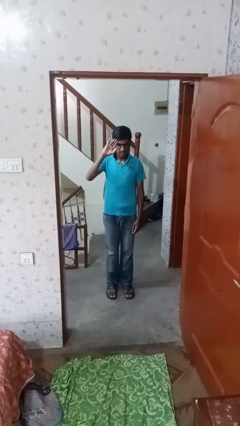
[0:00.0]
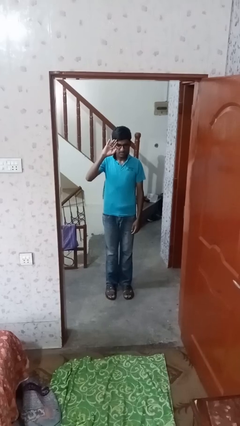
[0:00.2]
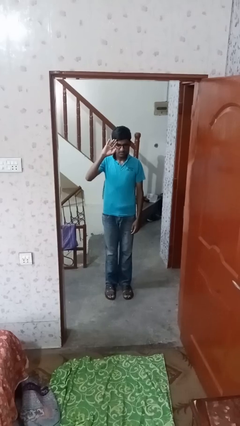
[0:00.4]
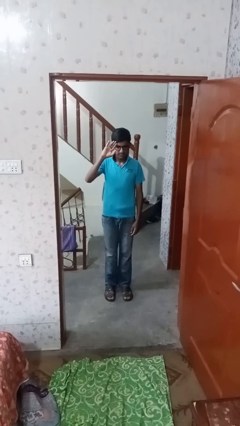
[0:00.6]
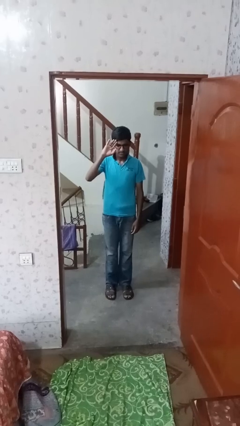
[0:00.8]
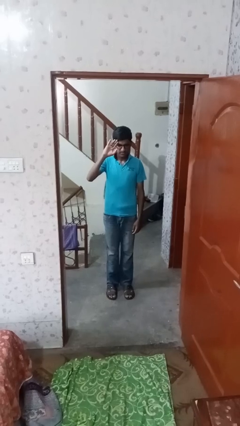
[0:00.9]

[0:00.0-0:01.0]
person salutes

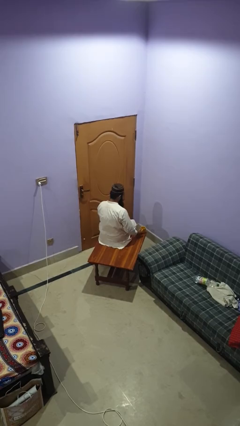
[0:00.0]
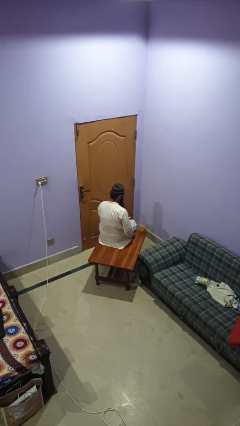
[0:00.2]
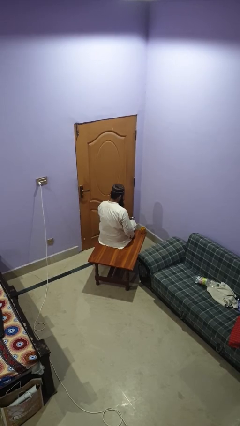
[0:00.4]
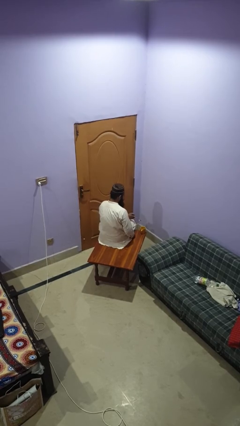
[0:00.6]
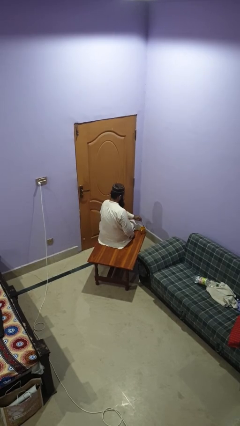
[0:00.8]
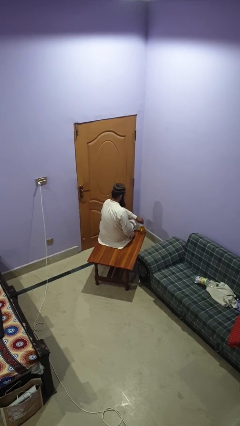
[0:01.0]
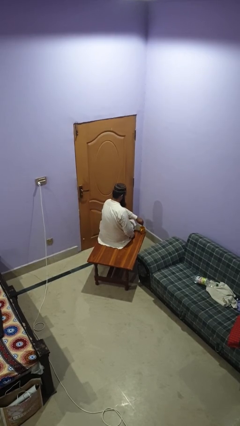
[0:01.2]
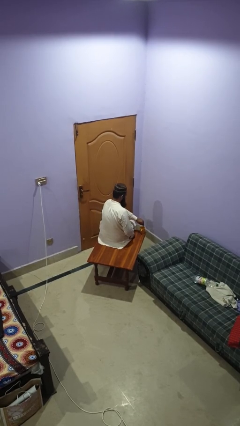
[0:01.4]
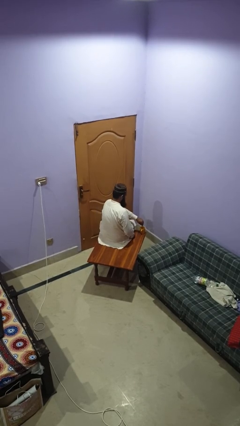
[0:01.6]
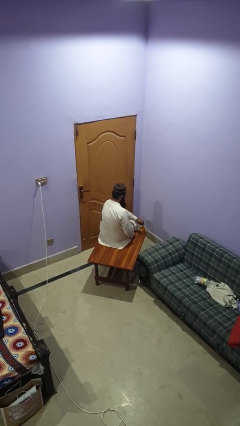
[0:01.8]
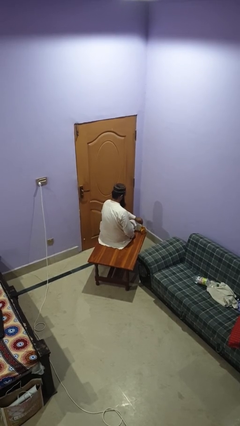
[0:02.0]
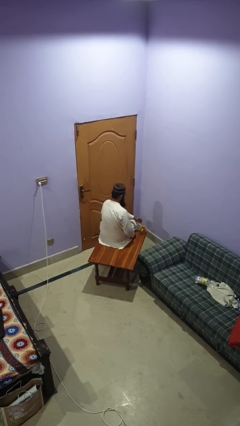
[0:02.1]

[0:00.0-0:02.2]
person stirs mug

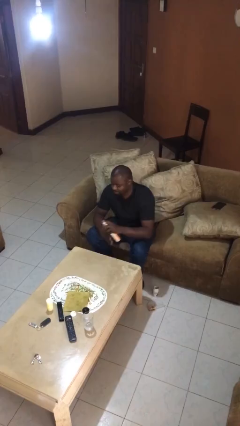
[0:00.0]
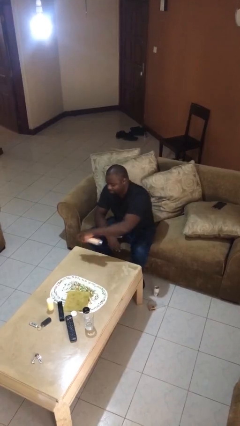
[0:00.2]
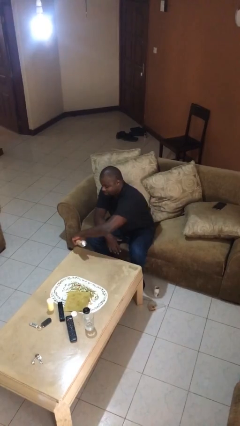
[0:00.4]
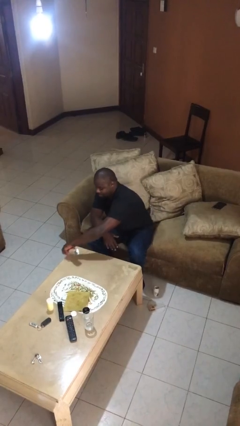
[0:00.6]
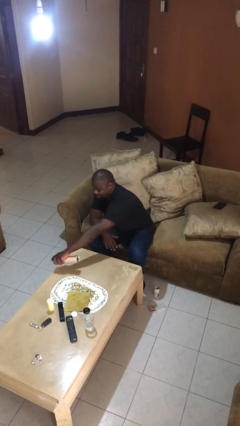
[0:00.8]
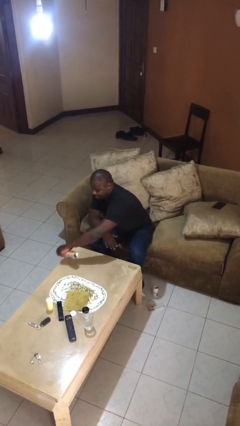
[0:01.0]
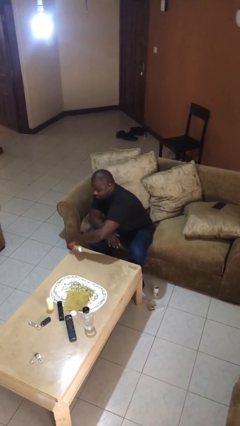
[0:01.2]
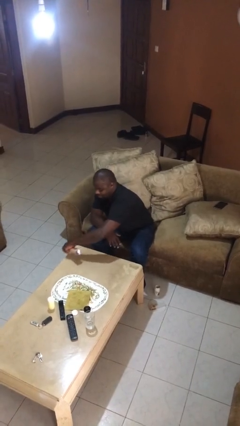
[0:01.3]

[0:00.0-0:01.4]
person sprays from bottle

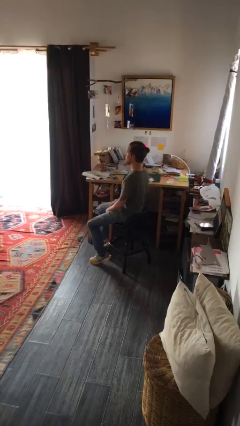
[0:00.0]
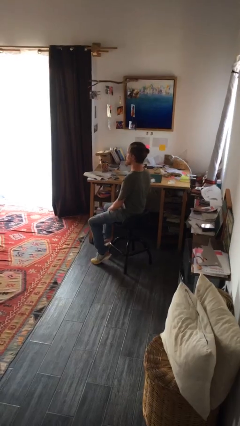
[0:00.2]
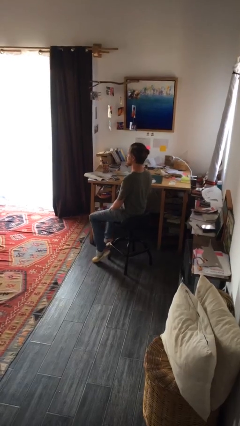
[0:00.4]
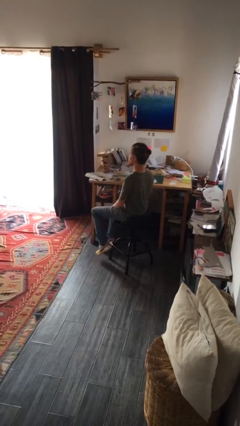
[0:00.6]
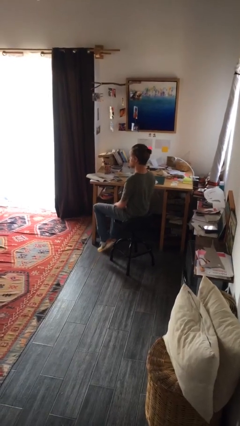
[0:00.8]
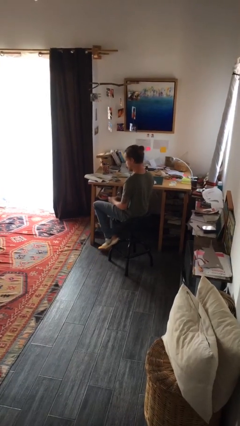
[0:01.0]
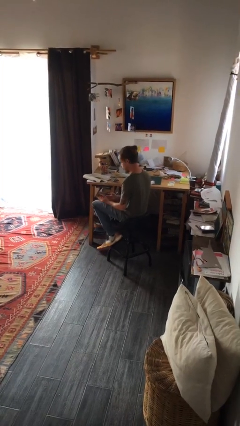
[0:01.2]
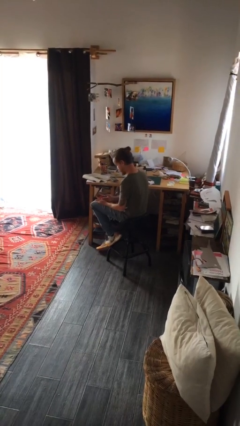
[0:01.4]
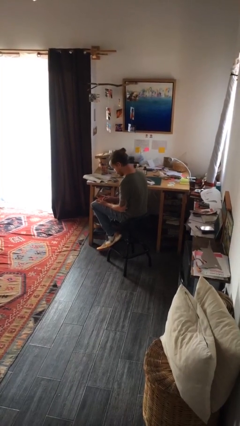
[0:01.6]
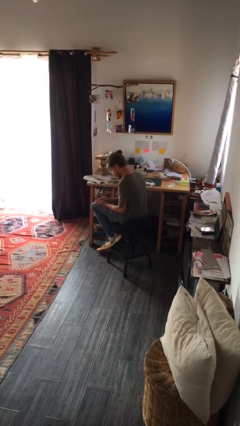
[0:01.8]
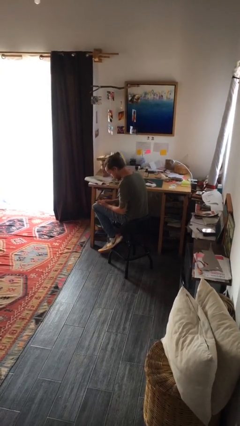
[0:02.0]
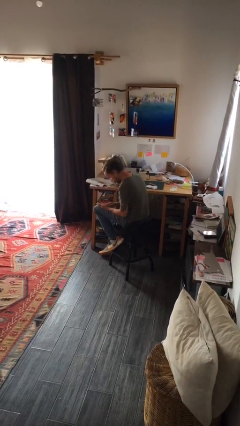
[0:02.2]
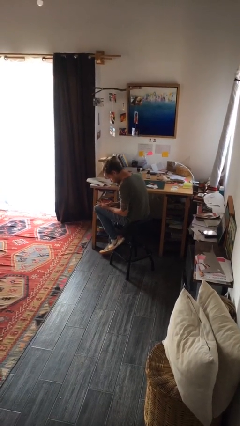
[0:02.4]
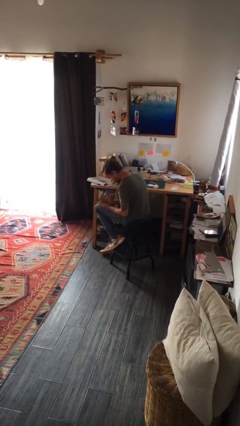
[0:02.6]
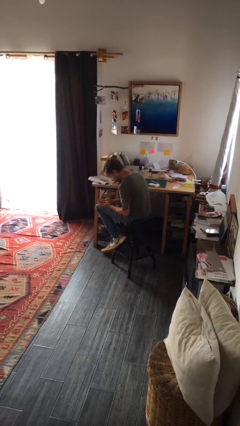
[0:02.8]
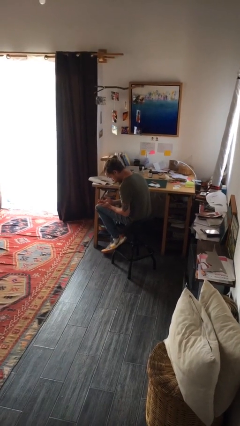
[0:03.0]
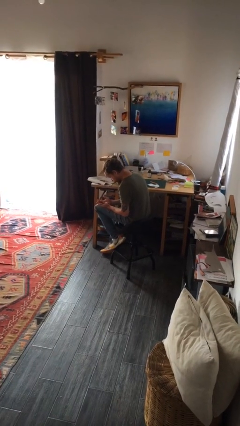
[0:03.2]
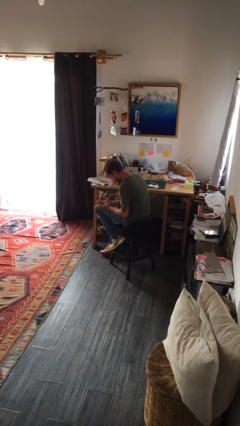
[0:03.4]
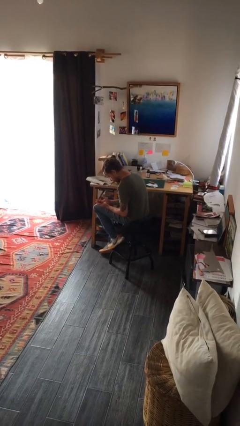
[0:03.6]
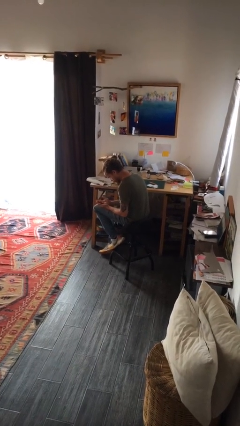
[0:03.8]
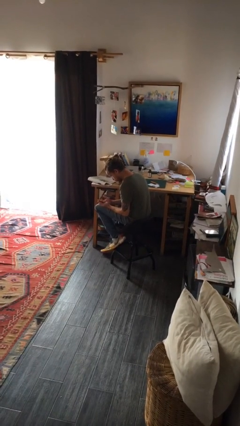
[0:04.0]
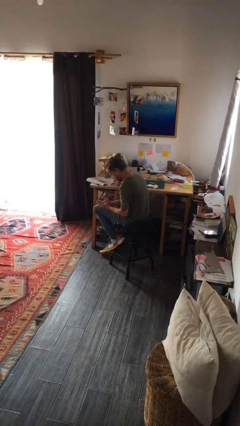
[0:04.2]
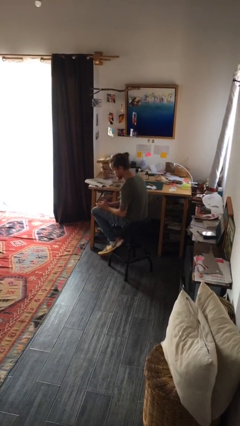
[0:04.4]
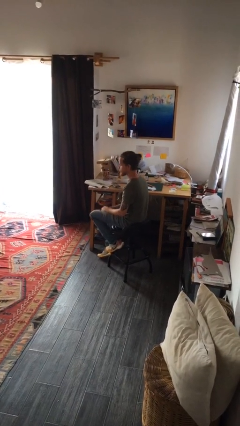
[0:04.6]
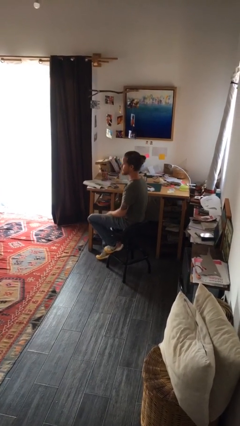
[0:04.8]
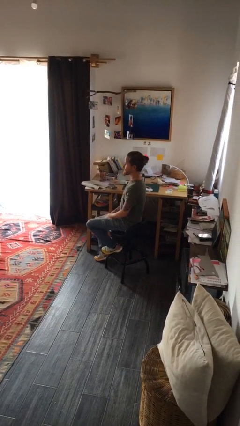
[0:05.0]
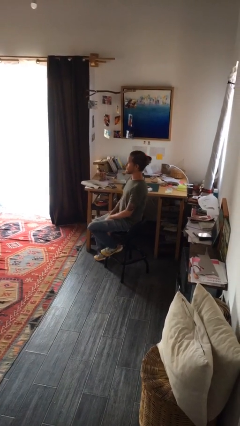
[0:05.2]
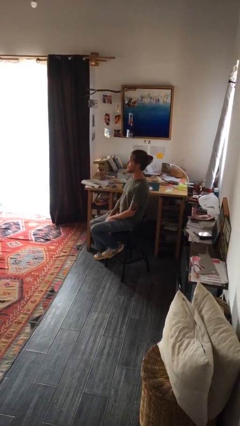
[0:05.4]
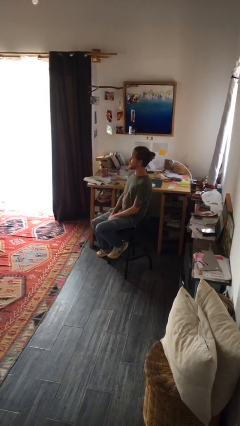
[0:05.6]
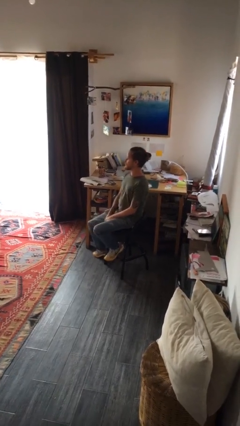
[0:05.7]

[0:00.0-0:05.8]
person looks at hands in lap

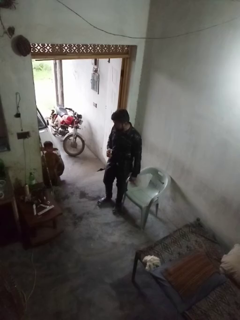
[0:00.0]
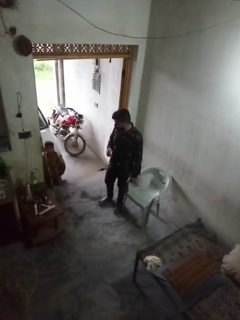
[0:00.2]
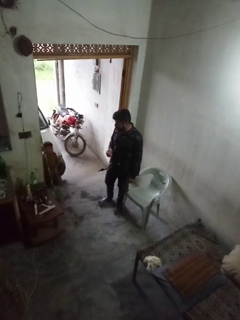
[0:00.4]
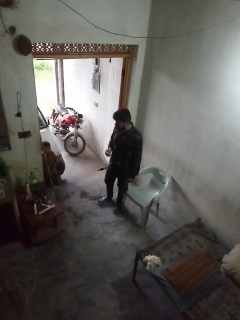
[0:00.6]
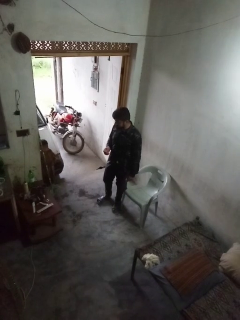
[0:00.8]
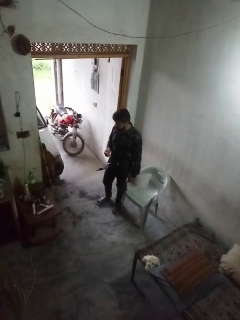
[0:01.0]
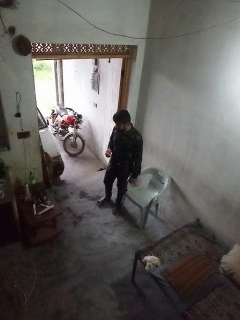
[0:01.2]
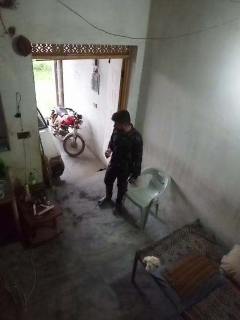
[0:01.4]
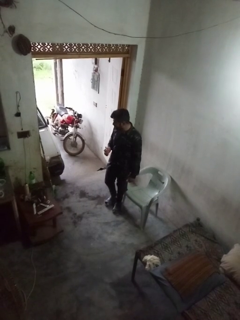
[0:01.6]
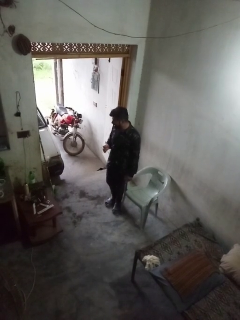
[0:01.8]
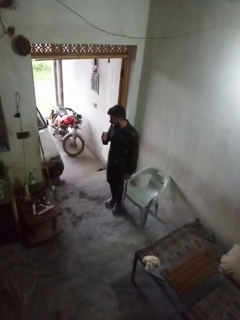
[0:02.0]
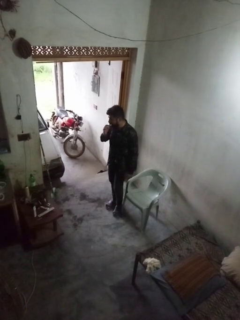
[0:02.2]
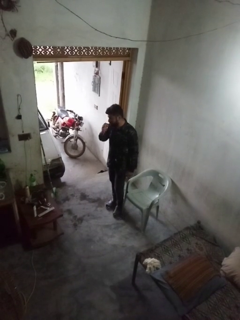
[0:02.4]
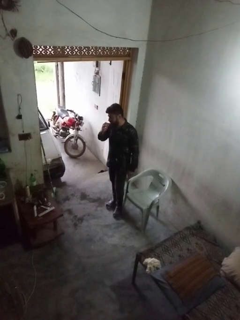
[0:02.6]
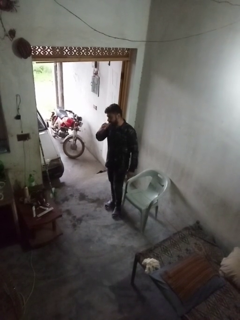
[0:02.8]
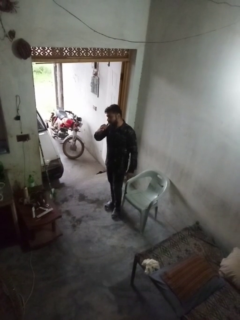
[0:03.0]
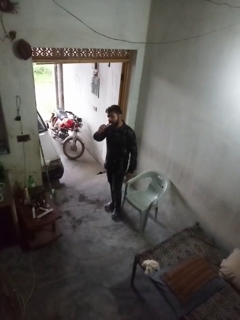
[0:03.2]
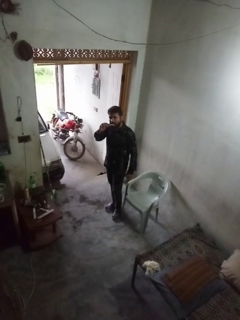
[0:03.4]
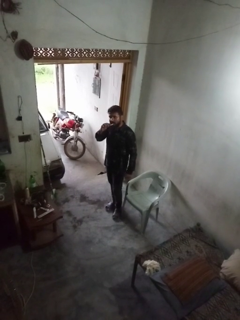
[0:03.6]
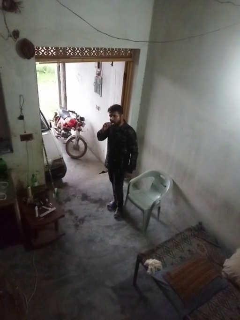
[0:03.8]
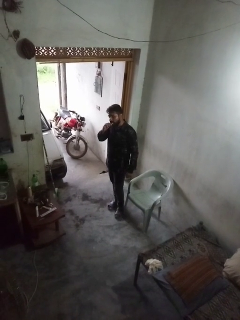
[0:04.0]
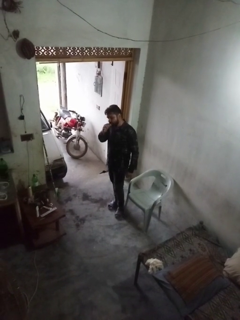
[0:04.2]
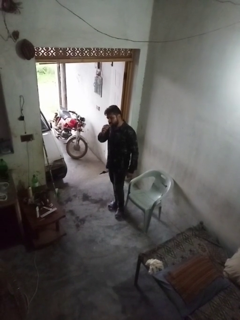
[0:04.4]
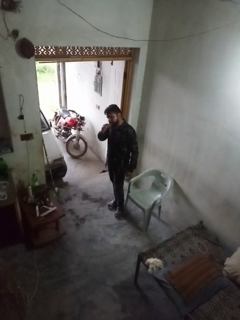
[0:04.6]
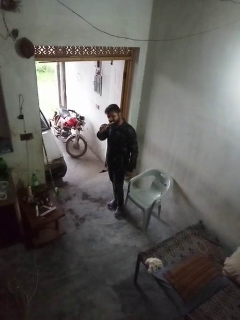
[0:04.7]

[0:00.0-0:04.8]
person brushes teeth

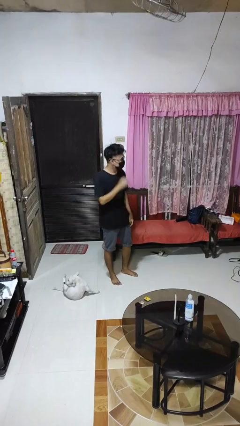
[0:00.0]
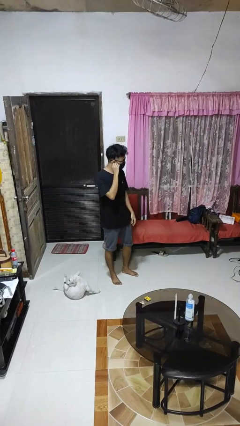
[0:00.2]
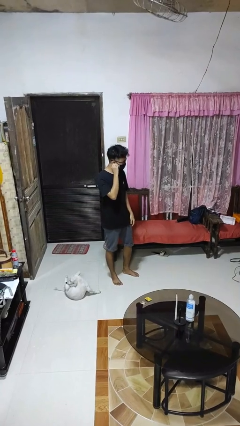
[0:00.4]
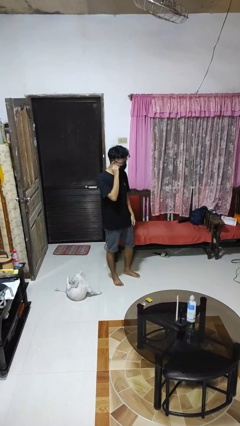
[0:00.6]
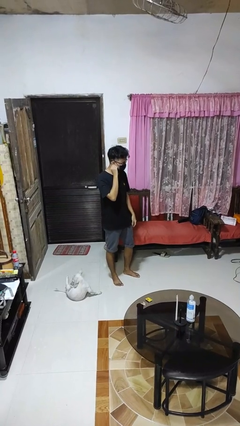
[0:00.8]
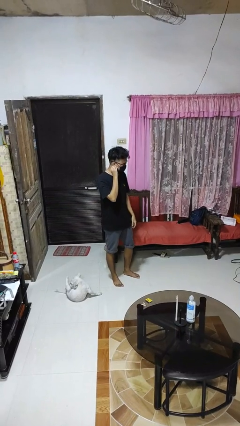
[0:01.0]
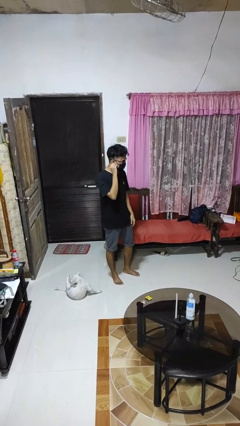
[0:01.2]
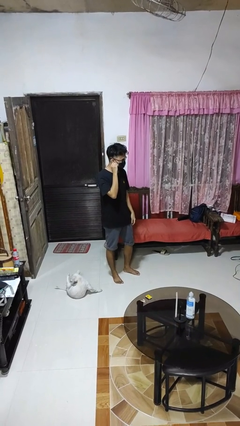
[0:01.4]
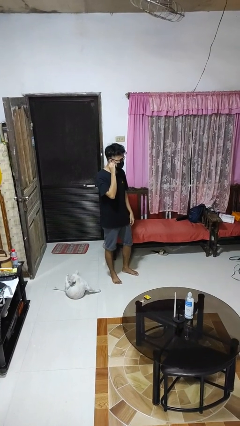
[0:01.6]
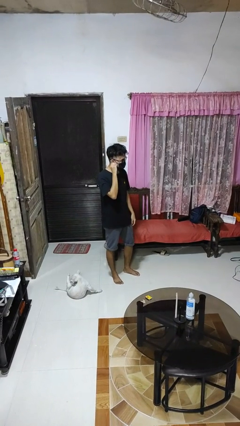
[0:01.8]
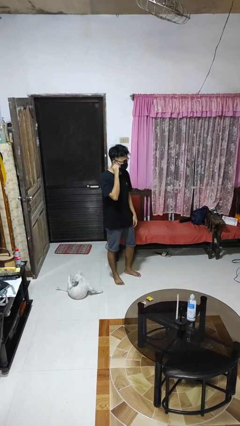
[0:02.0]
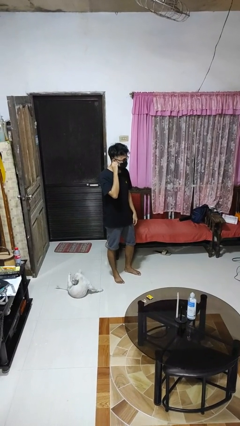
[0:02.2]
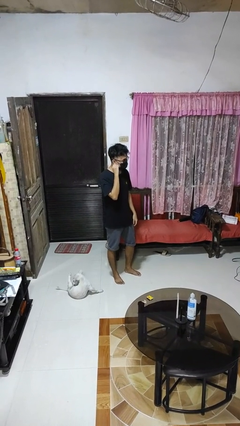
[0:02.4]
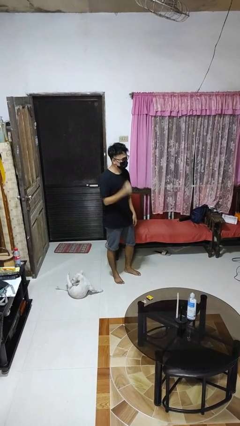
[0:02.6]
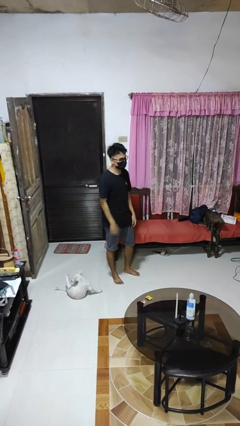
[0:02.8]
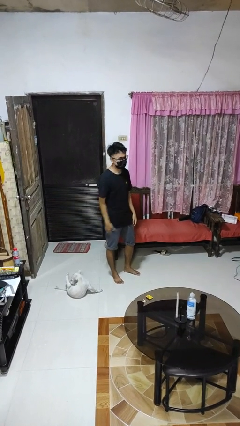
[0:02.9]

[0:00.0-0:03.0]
person touches earlobe
